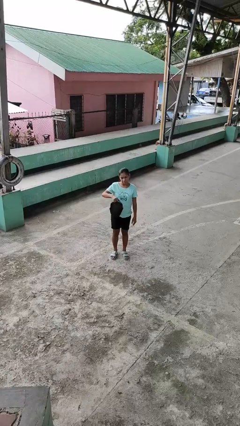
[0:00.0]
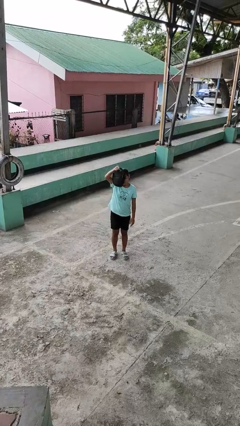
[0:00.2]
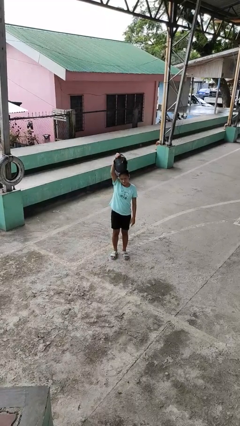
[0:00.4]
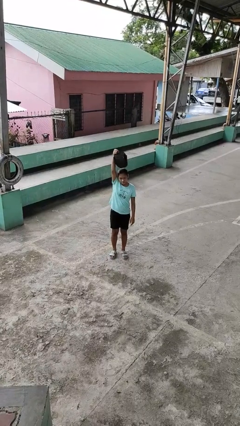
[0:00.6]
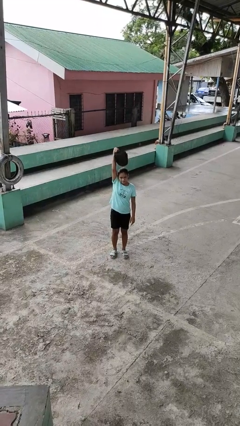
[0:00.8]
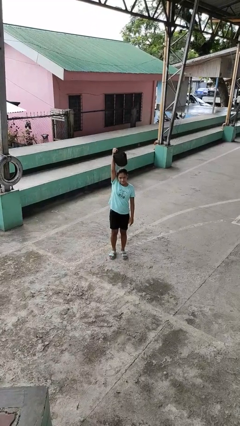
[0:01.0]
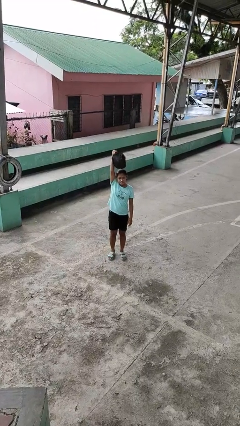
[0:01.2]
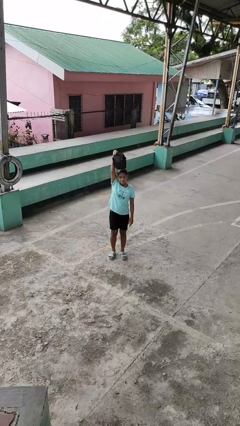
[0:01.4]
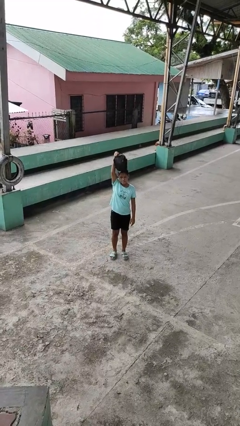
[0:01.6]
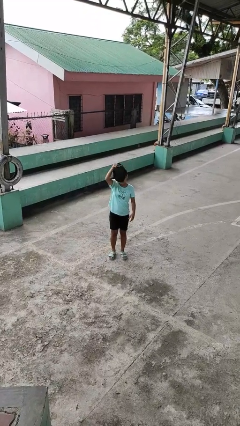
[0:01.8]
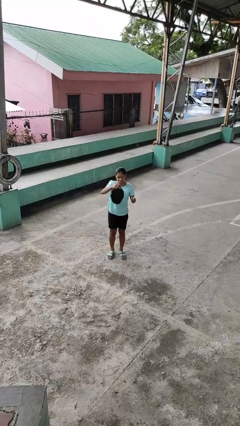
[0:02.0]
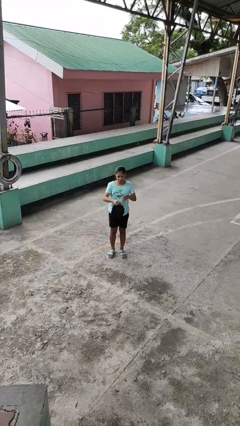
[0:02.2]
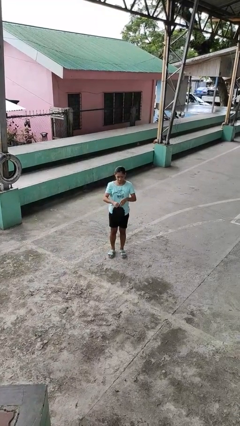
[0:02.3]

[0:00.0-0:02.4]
person holds object above head

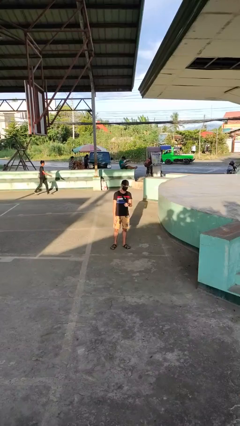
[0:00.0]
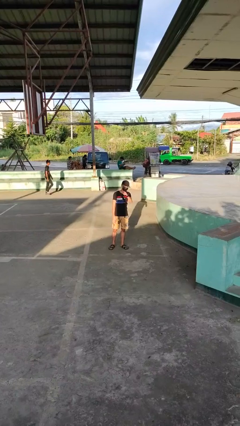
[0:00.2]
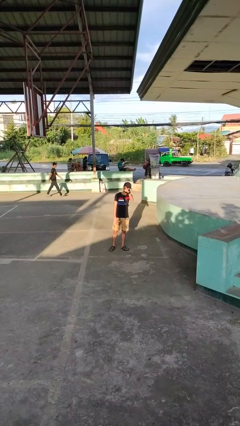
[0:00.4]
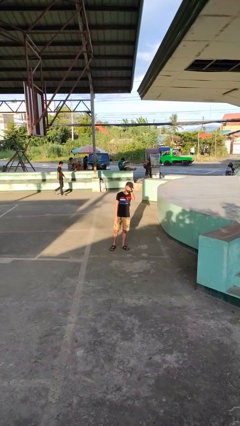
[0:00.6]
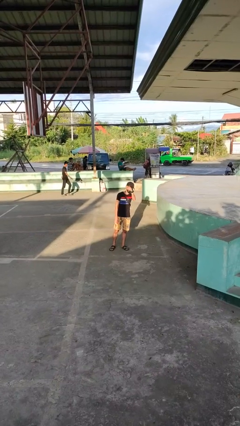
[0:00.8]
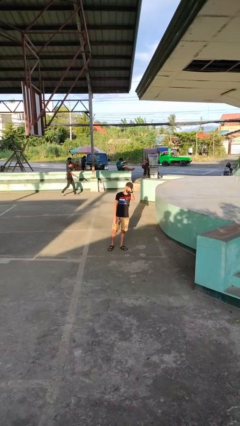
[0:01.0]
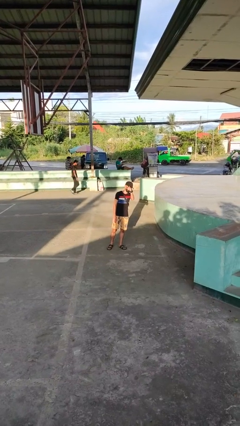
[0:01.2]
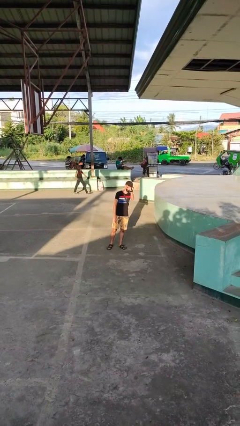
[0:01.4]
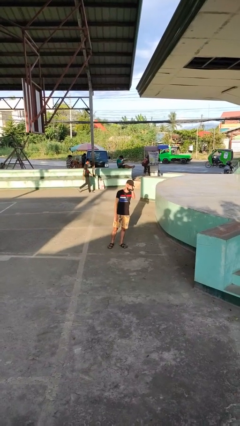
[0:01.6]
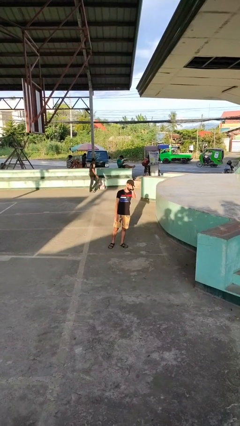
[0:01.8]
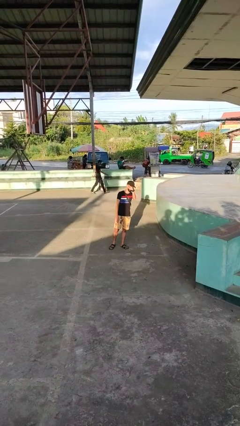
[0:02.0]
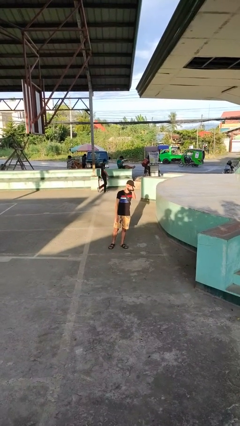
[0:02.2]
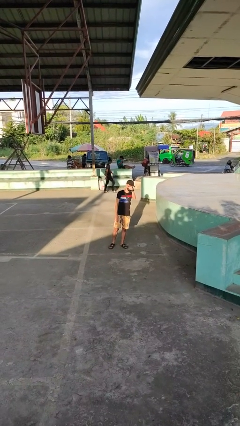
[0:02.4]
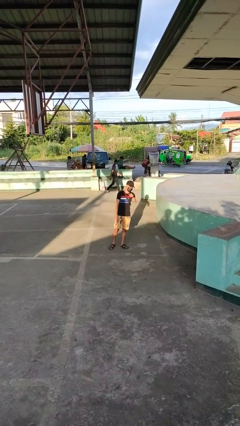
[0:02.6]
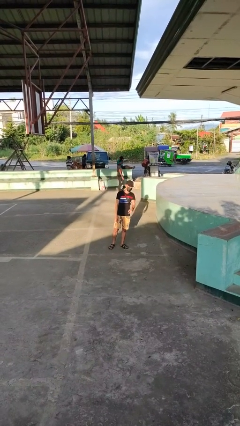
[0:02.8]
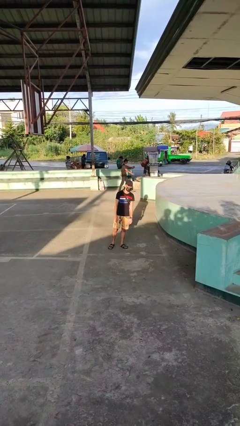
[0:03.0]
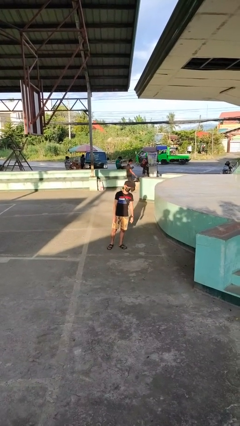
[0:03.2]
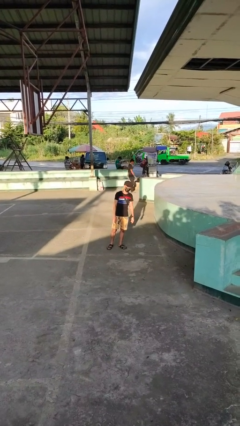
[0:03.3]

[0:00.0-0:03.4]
person points at person

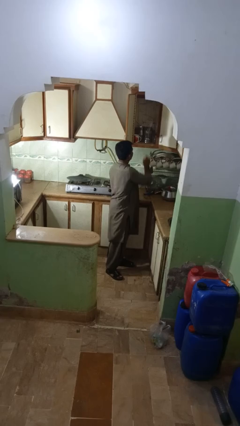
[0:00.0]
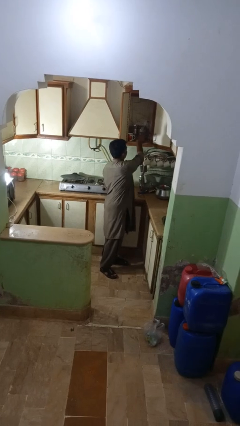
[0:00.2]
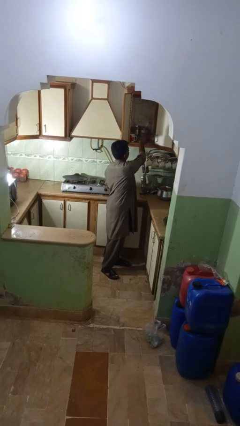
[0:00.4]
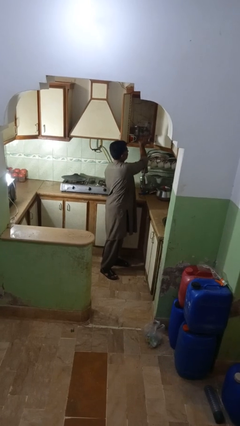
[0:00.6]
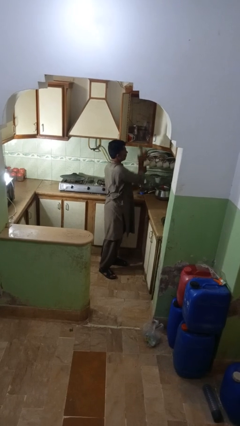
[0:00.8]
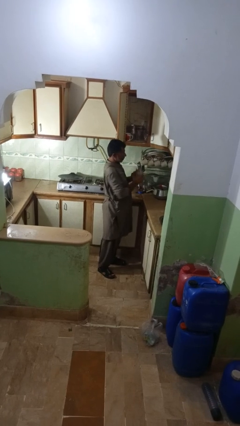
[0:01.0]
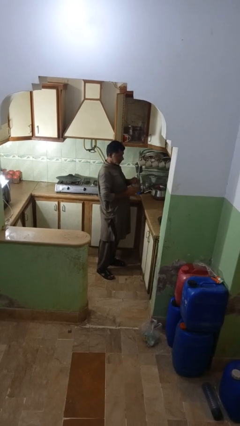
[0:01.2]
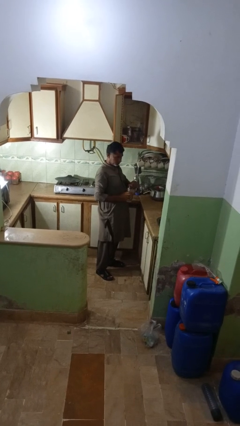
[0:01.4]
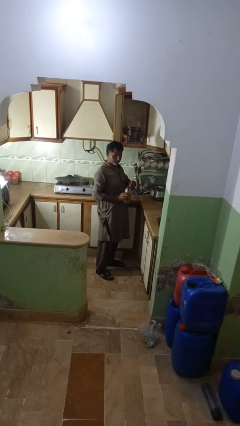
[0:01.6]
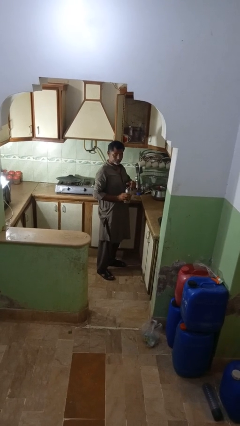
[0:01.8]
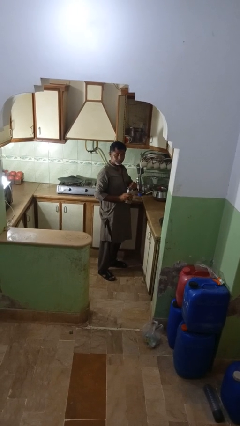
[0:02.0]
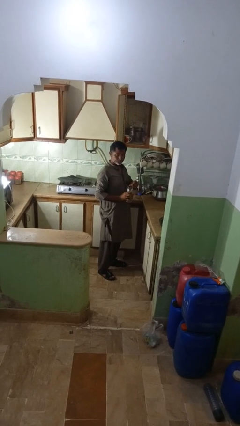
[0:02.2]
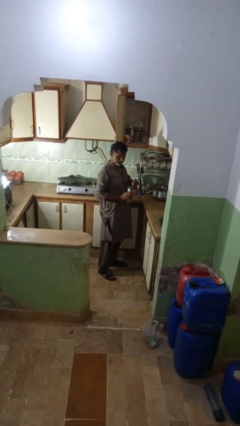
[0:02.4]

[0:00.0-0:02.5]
person takes object from kitchen drawer

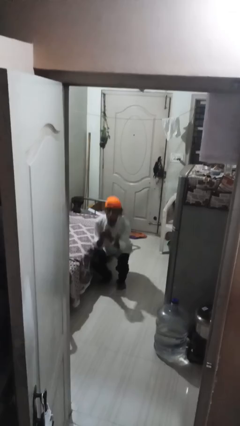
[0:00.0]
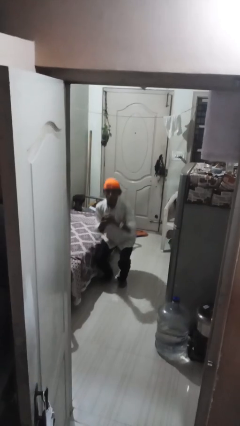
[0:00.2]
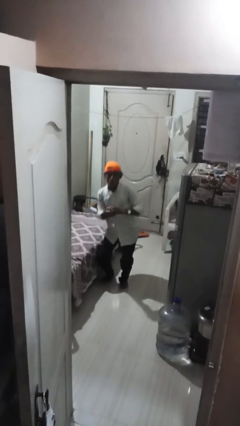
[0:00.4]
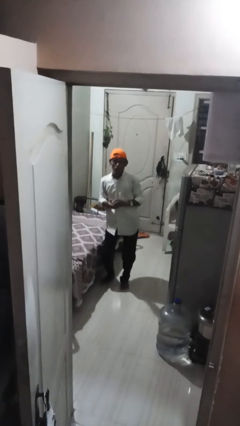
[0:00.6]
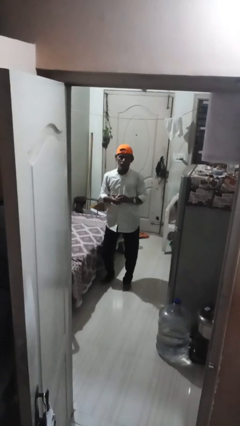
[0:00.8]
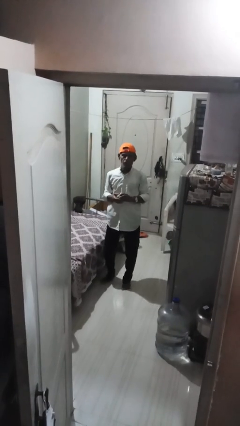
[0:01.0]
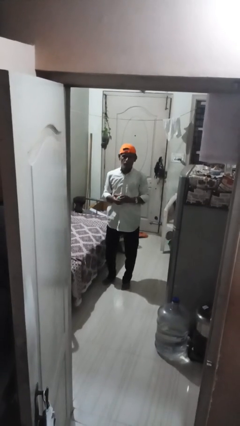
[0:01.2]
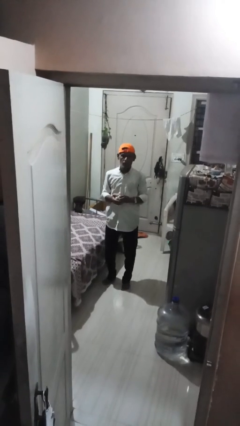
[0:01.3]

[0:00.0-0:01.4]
person catches dropped object

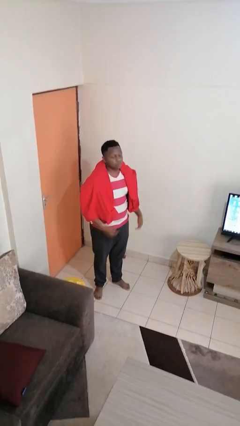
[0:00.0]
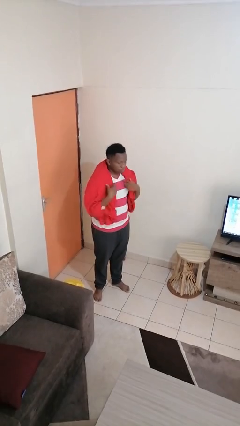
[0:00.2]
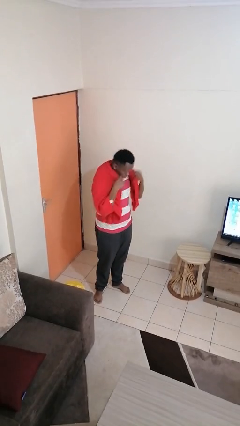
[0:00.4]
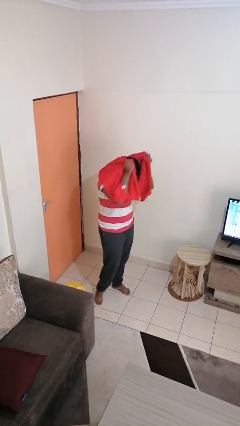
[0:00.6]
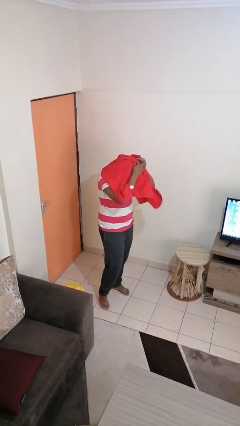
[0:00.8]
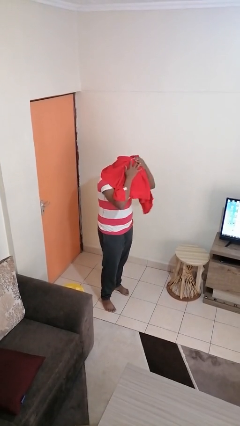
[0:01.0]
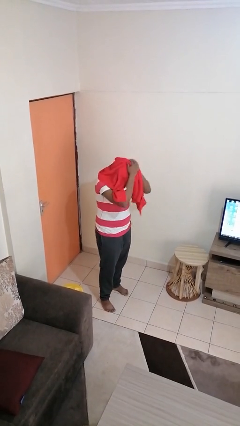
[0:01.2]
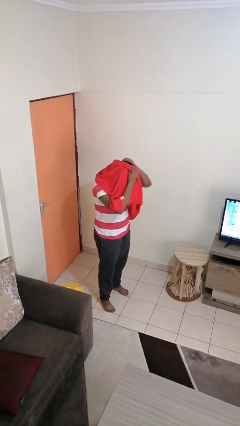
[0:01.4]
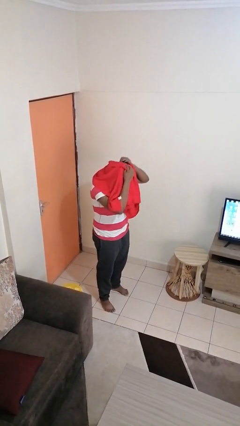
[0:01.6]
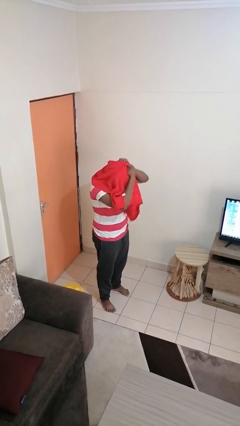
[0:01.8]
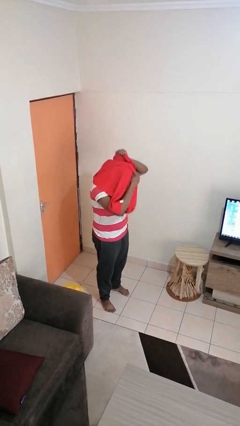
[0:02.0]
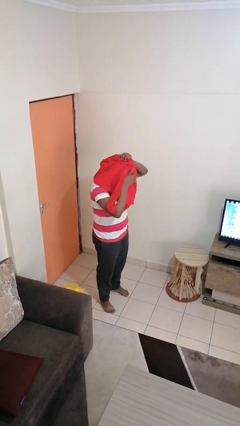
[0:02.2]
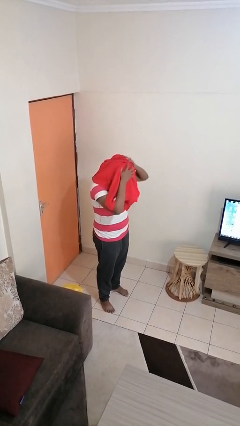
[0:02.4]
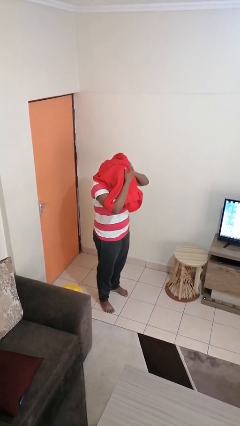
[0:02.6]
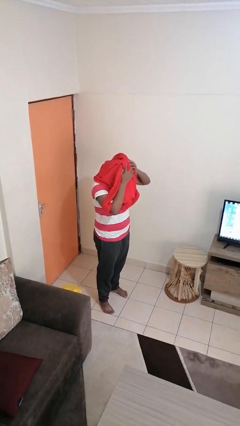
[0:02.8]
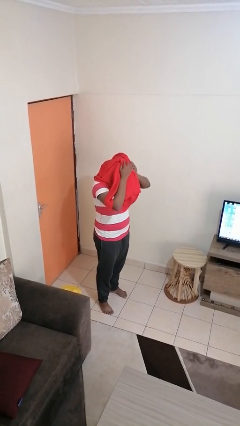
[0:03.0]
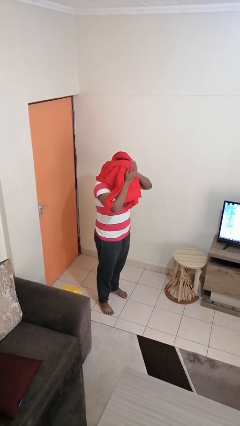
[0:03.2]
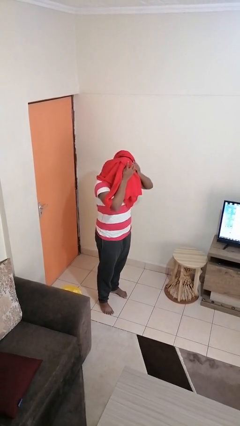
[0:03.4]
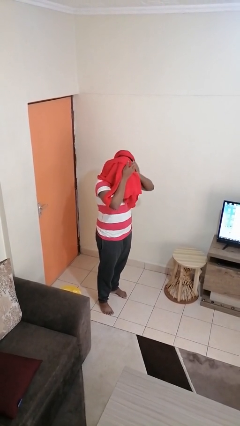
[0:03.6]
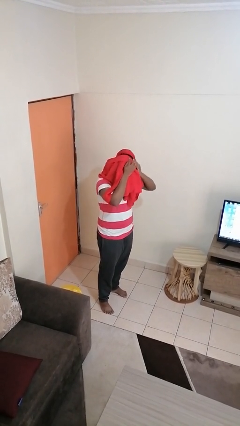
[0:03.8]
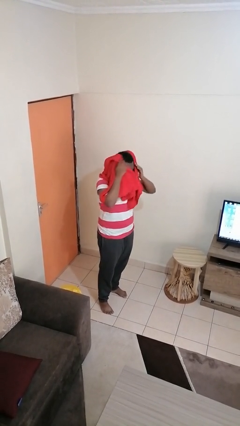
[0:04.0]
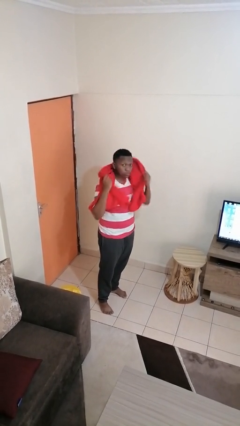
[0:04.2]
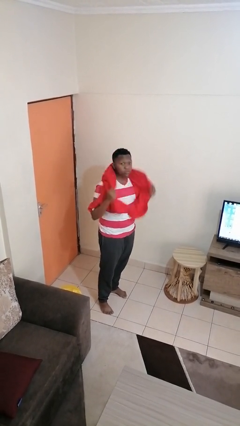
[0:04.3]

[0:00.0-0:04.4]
person dries hair with towel

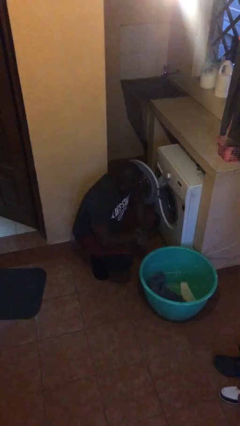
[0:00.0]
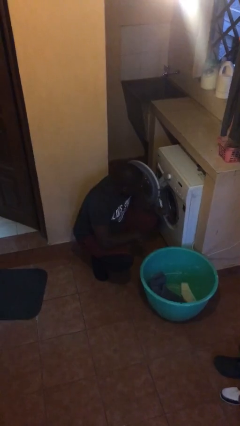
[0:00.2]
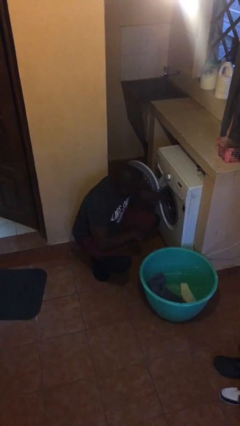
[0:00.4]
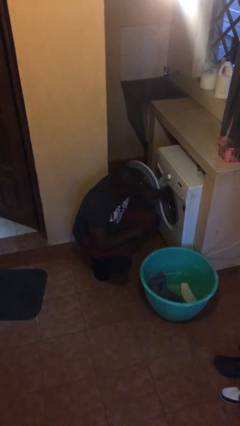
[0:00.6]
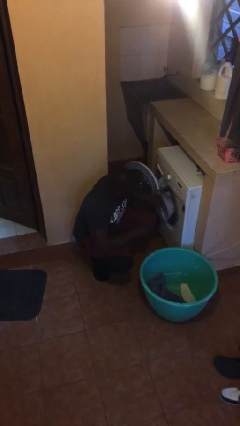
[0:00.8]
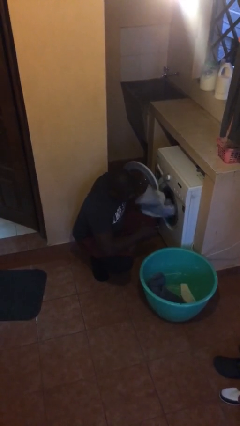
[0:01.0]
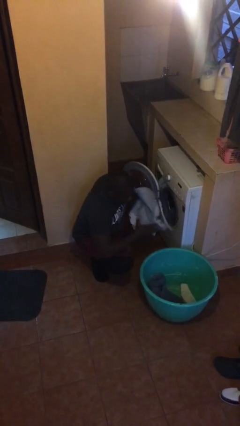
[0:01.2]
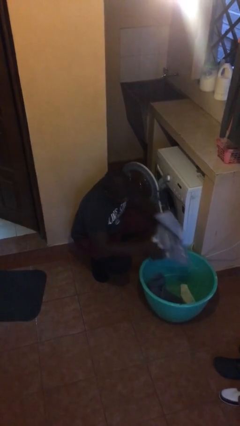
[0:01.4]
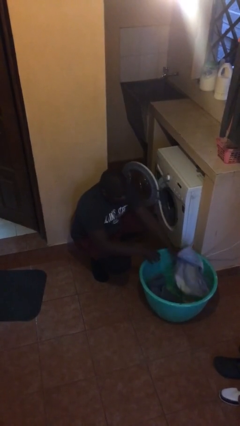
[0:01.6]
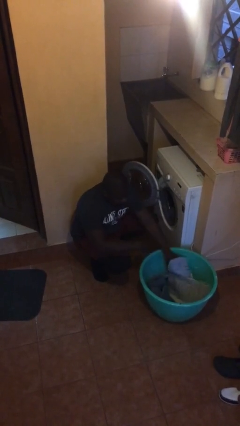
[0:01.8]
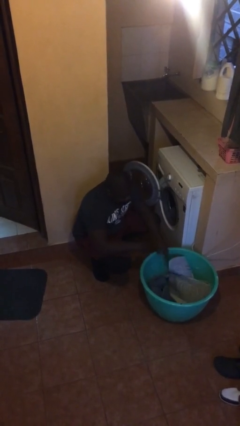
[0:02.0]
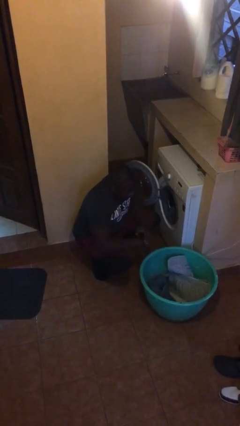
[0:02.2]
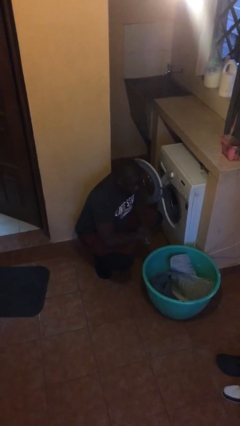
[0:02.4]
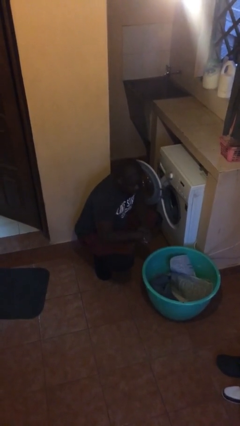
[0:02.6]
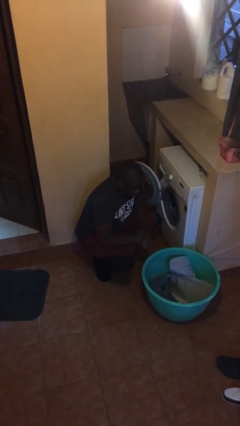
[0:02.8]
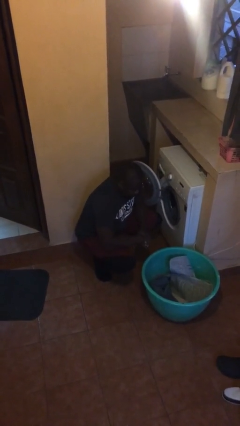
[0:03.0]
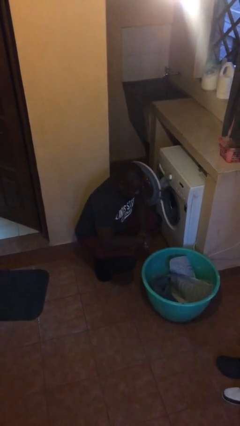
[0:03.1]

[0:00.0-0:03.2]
person unloads clotheswasher

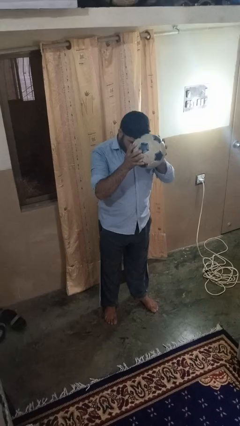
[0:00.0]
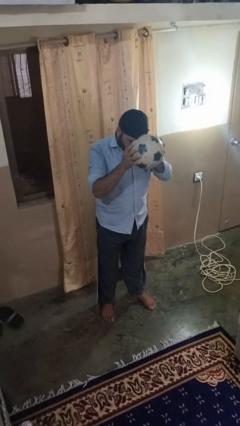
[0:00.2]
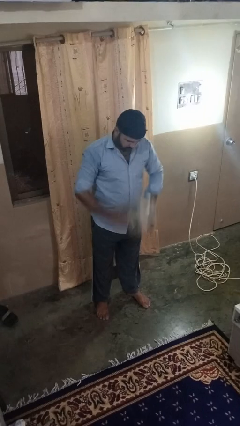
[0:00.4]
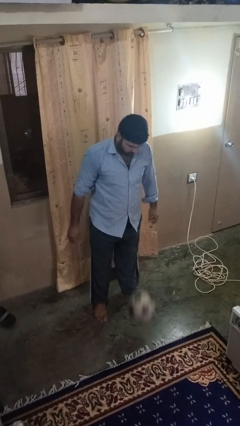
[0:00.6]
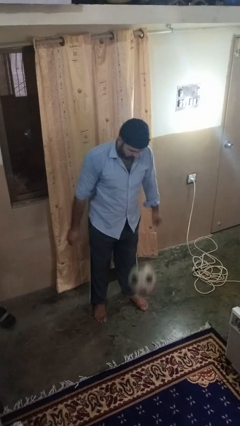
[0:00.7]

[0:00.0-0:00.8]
person bounces ball on floor
